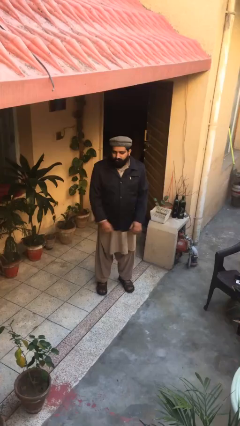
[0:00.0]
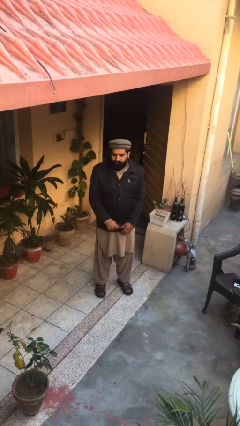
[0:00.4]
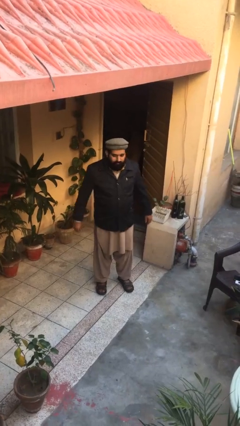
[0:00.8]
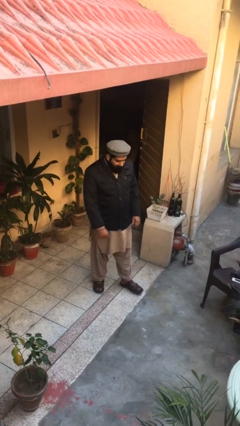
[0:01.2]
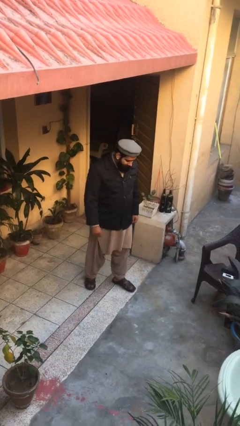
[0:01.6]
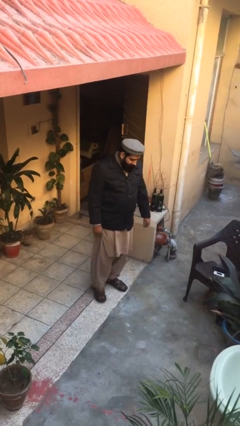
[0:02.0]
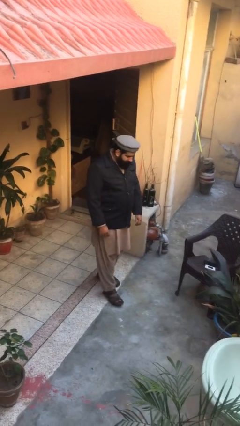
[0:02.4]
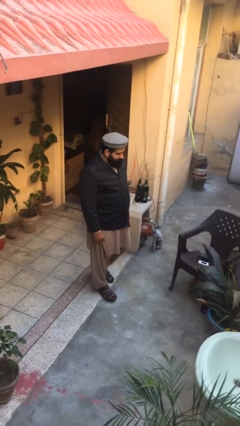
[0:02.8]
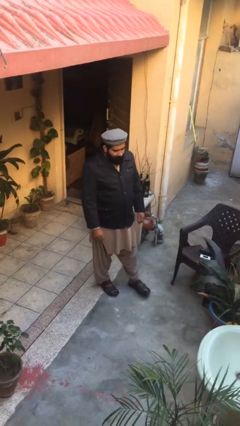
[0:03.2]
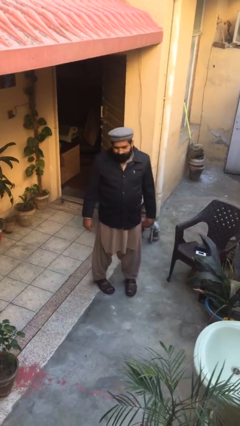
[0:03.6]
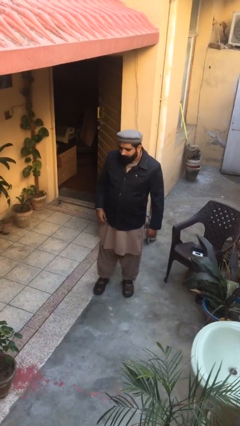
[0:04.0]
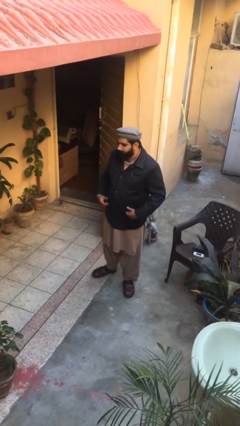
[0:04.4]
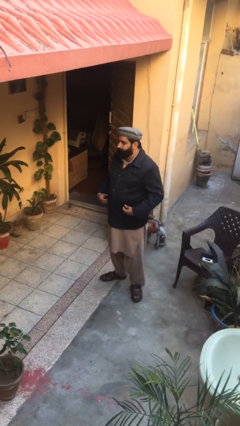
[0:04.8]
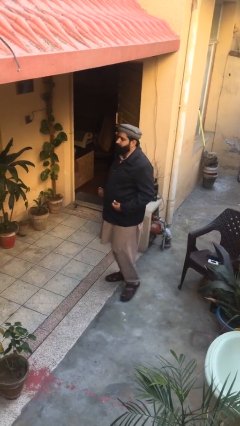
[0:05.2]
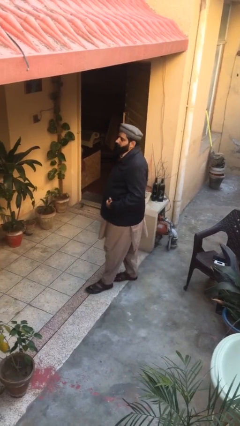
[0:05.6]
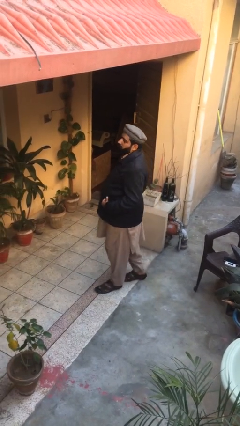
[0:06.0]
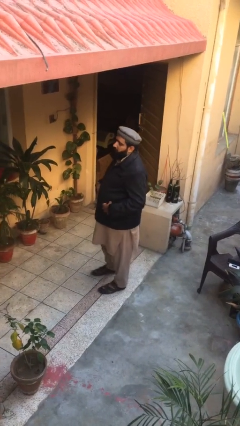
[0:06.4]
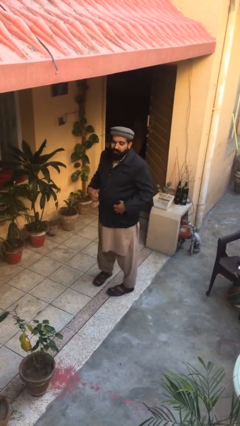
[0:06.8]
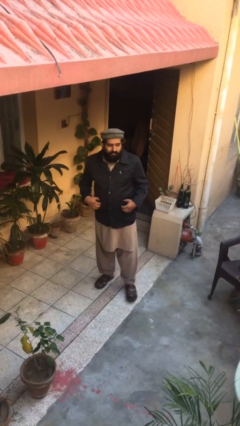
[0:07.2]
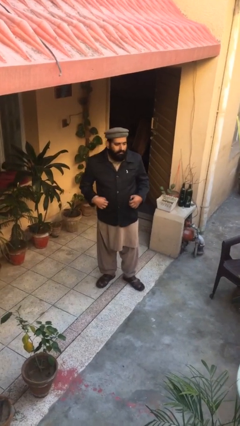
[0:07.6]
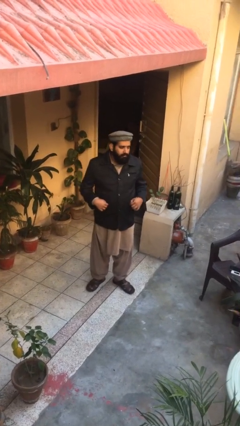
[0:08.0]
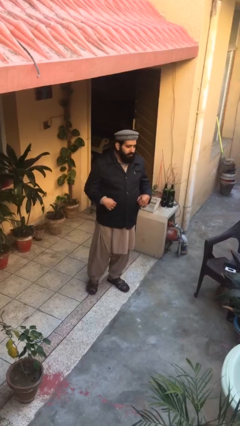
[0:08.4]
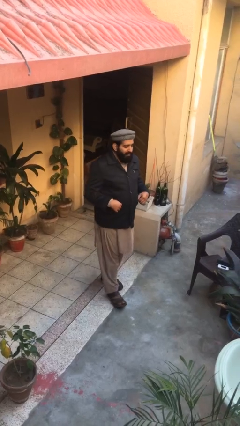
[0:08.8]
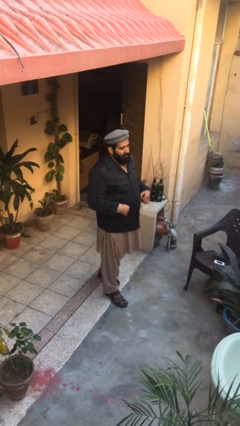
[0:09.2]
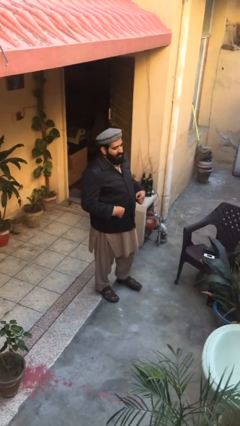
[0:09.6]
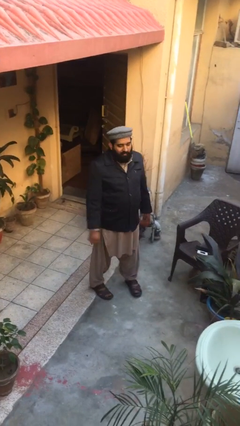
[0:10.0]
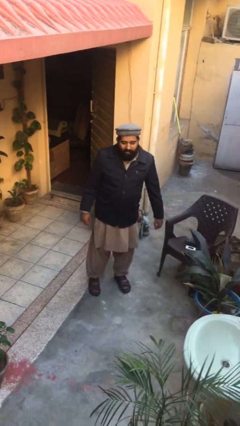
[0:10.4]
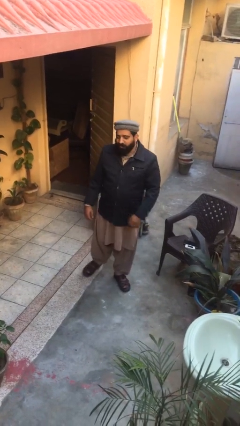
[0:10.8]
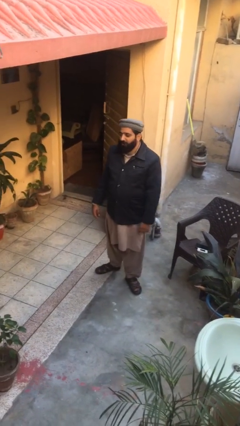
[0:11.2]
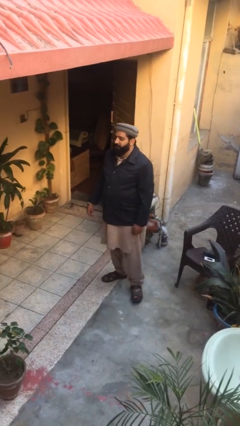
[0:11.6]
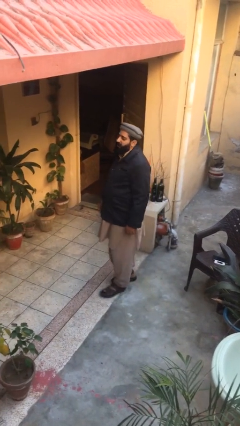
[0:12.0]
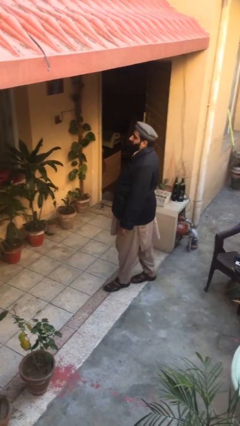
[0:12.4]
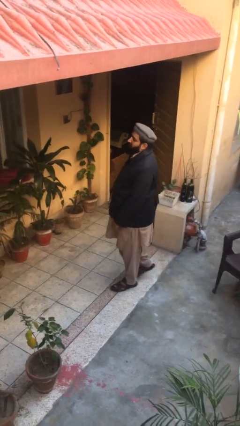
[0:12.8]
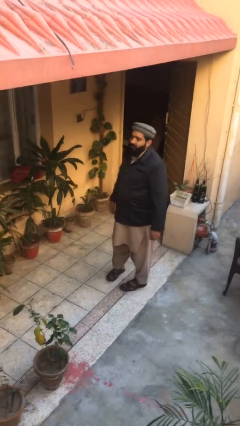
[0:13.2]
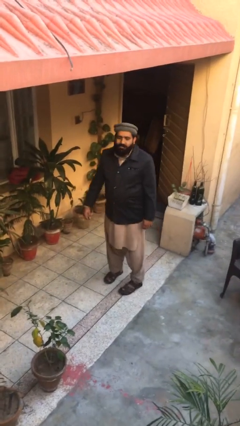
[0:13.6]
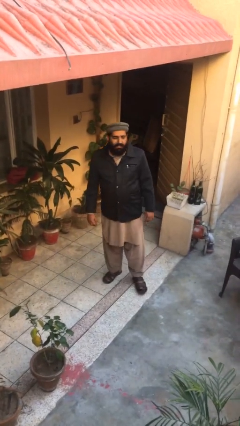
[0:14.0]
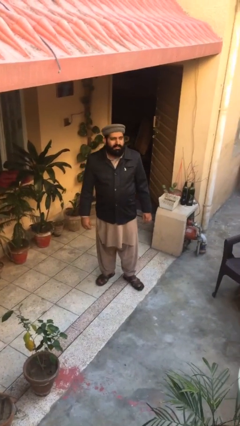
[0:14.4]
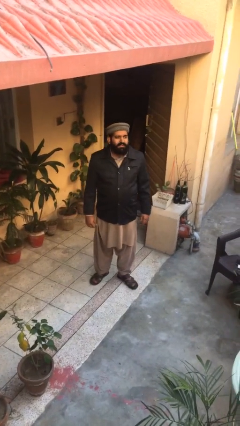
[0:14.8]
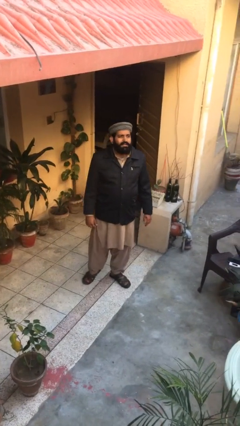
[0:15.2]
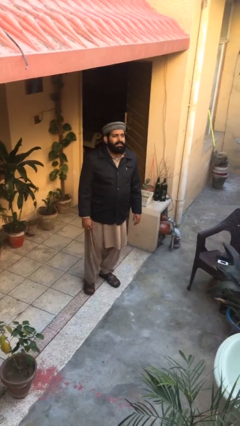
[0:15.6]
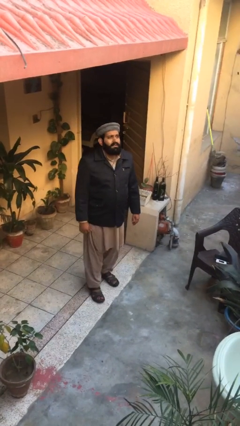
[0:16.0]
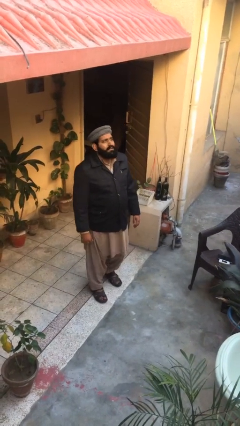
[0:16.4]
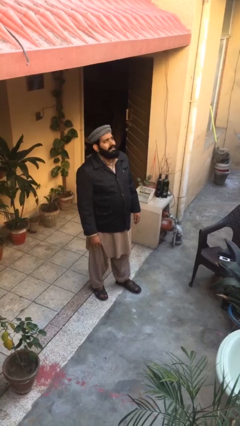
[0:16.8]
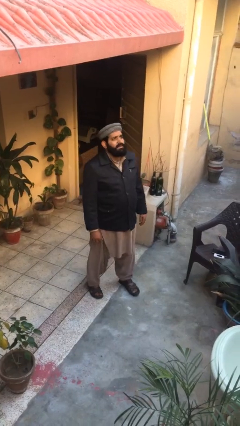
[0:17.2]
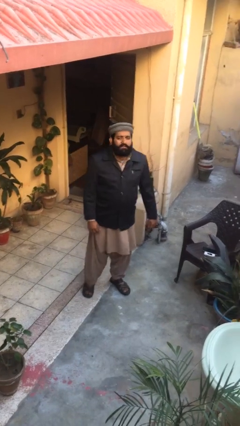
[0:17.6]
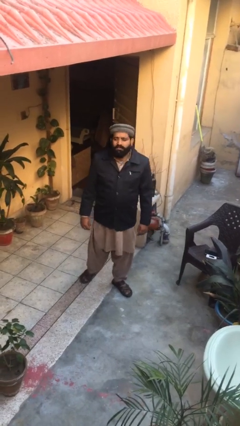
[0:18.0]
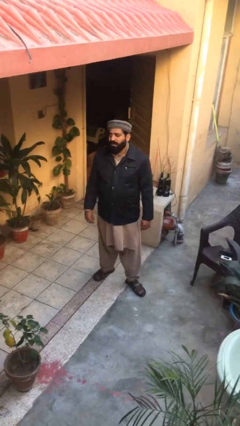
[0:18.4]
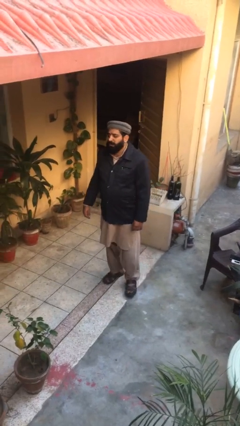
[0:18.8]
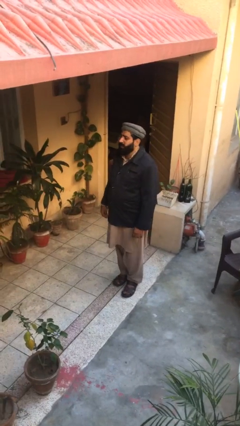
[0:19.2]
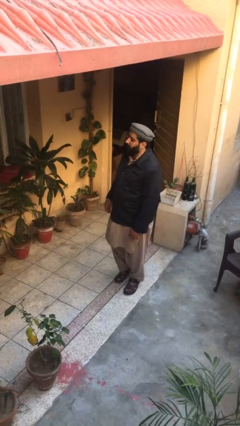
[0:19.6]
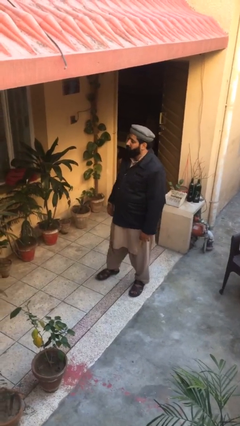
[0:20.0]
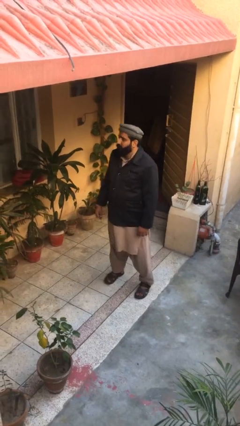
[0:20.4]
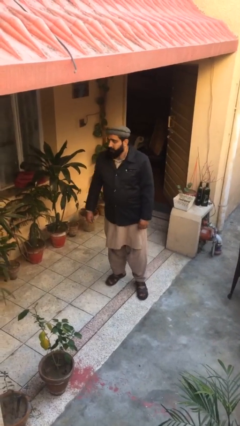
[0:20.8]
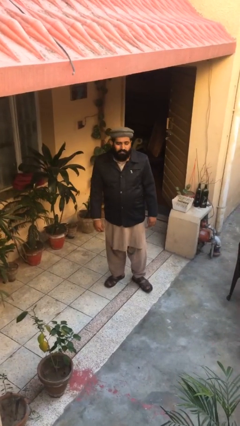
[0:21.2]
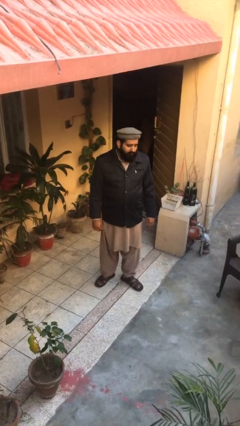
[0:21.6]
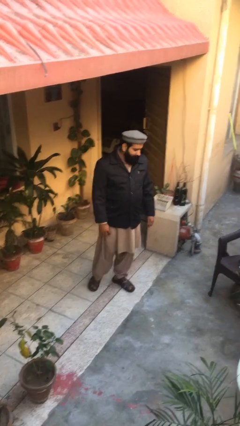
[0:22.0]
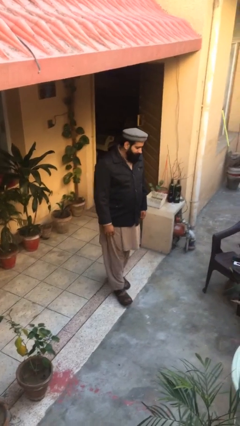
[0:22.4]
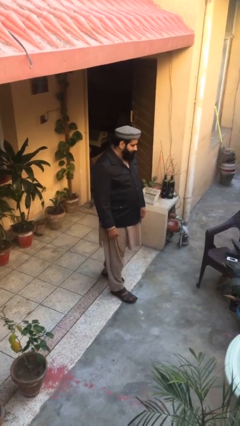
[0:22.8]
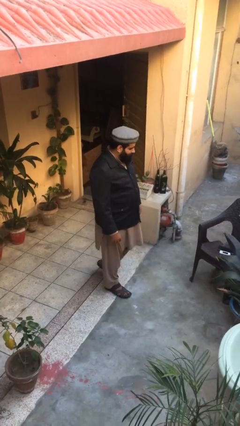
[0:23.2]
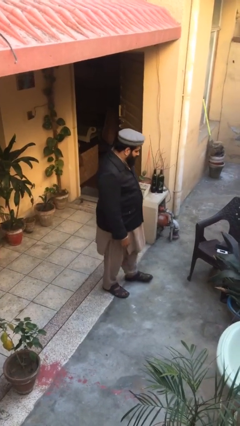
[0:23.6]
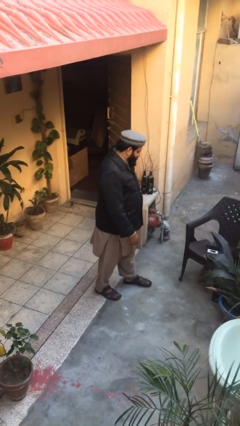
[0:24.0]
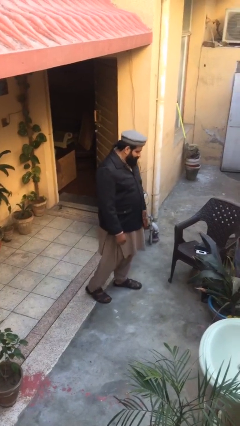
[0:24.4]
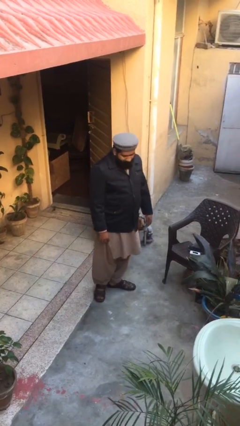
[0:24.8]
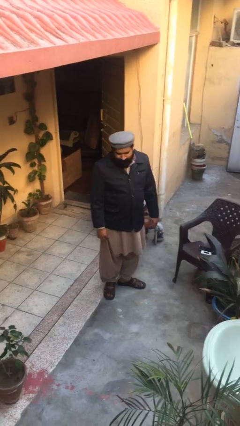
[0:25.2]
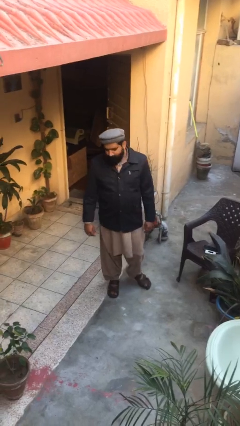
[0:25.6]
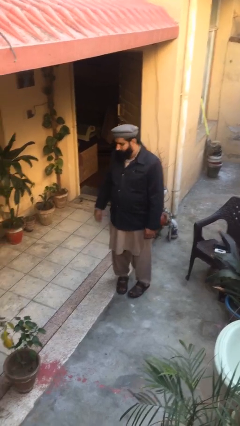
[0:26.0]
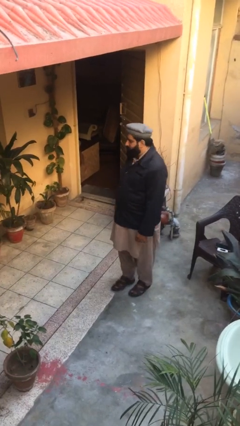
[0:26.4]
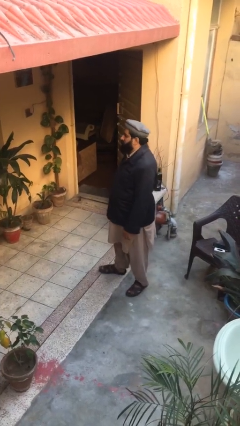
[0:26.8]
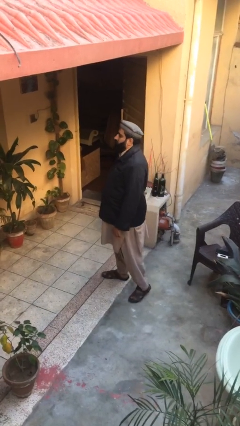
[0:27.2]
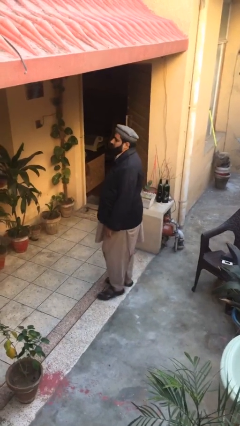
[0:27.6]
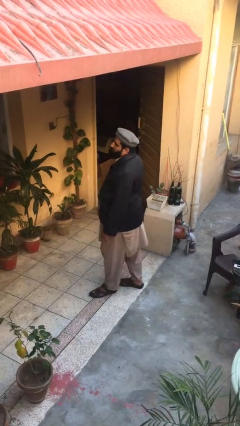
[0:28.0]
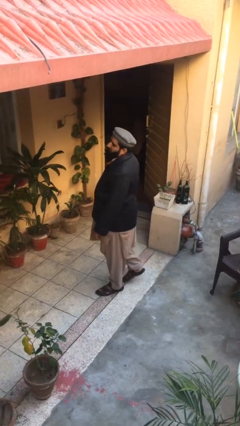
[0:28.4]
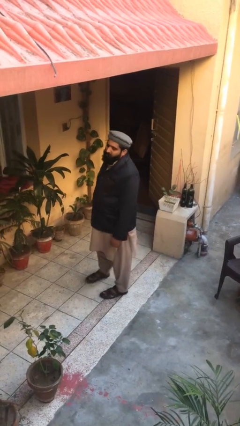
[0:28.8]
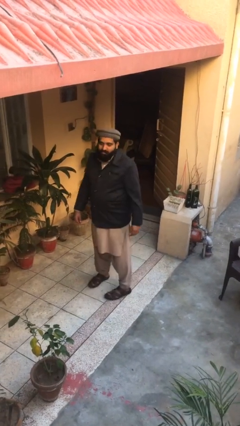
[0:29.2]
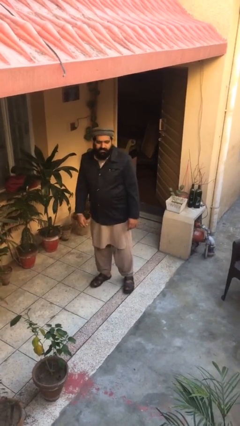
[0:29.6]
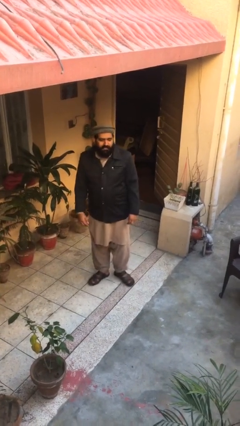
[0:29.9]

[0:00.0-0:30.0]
person walks

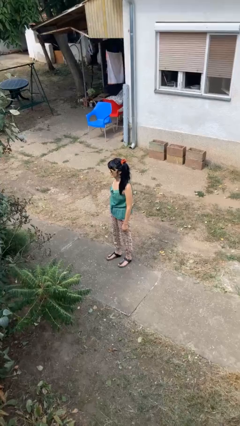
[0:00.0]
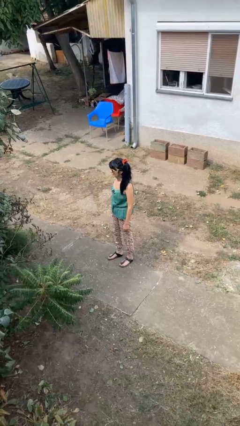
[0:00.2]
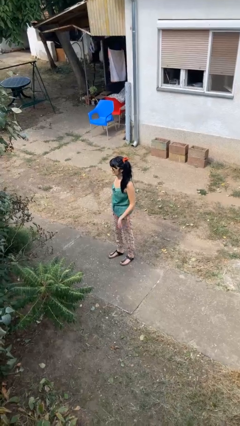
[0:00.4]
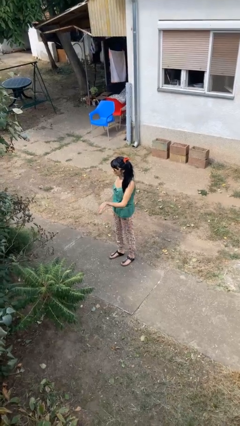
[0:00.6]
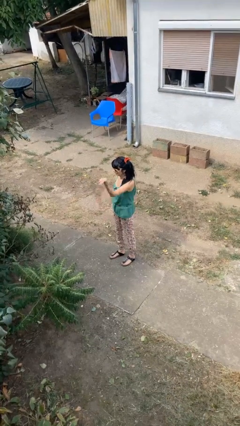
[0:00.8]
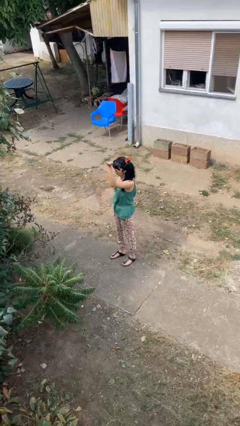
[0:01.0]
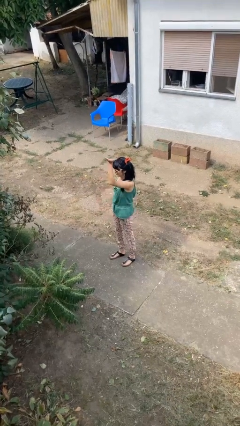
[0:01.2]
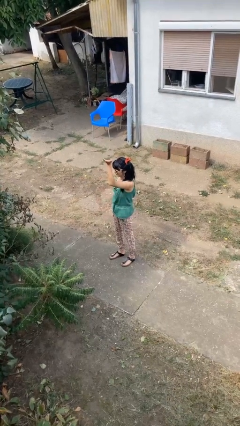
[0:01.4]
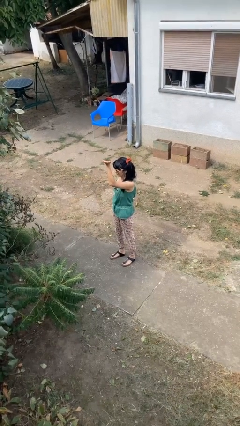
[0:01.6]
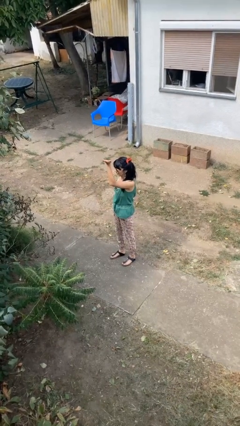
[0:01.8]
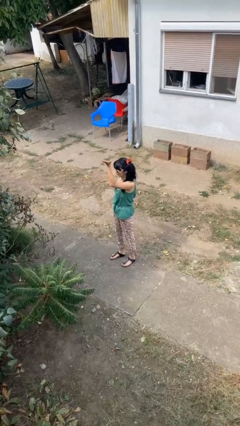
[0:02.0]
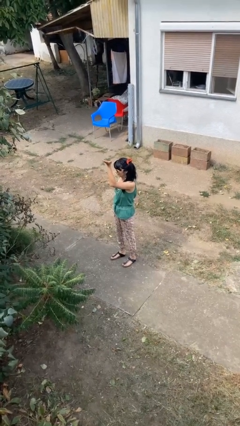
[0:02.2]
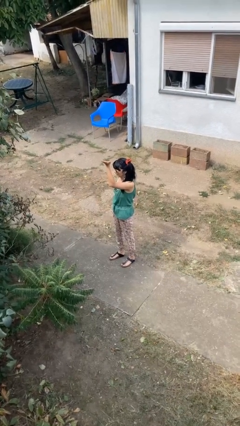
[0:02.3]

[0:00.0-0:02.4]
person gestures swipe up

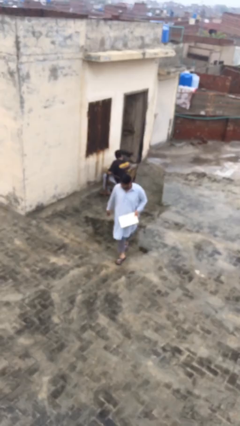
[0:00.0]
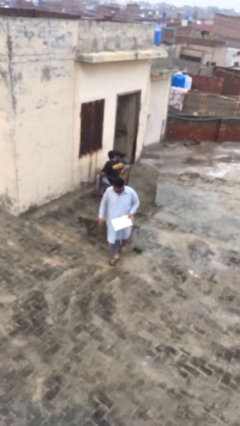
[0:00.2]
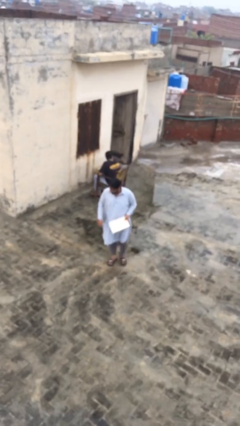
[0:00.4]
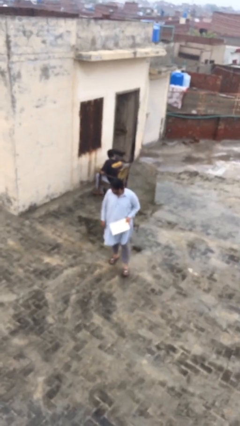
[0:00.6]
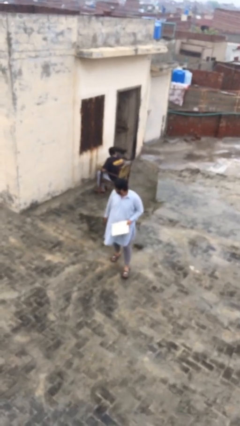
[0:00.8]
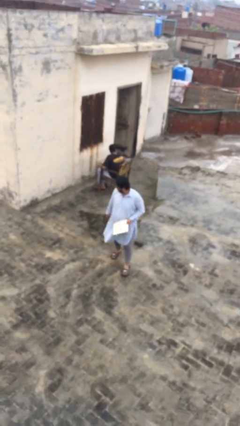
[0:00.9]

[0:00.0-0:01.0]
person steals object from person
